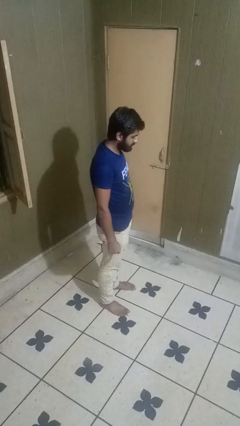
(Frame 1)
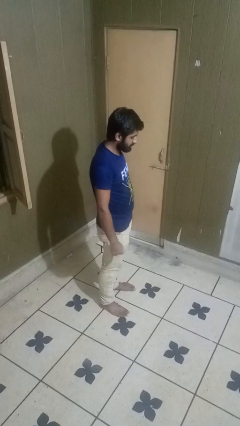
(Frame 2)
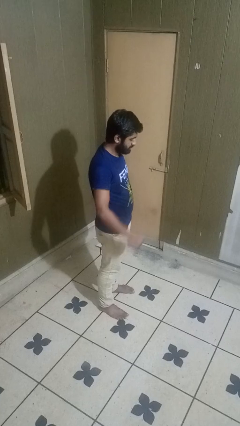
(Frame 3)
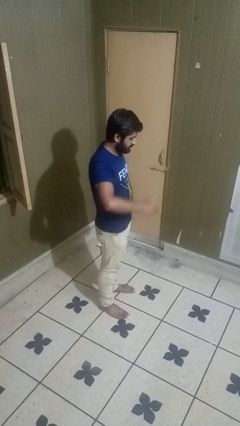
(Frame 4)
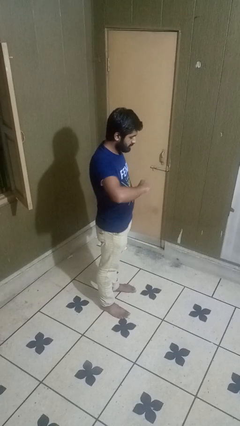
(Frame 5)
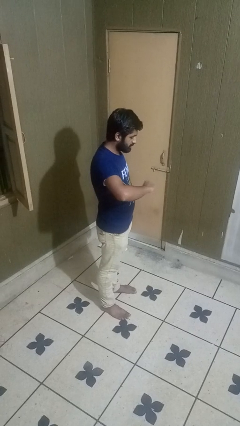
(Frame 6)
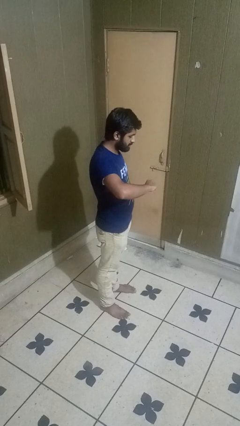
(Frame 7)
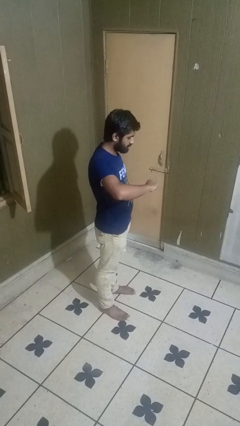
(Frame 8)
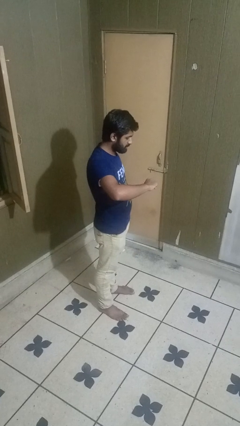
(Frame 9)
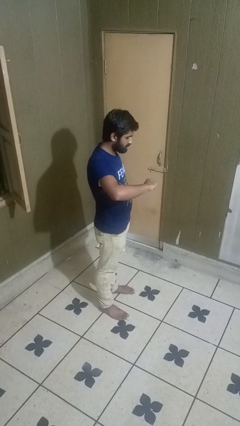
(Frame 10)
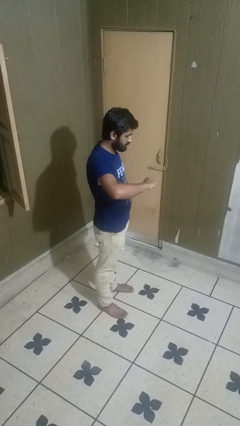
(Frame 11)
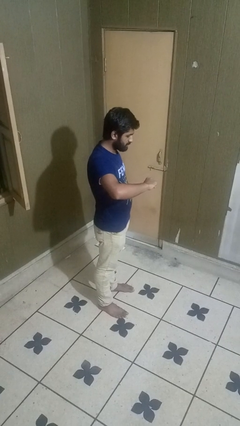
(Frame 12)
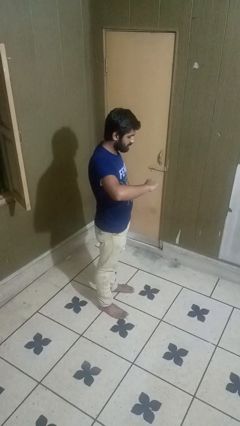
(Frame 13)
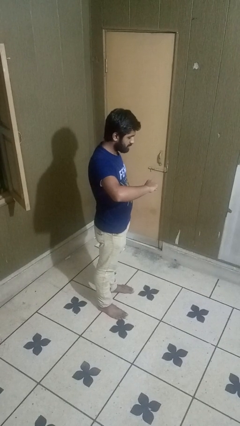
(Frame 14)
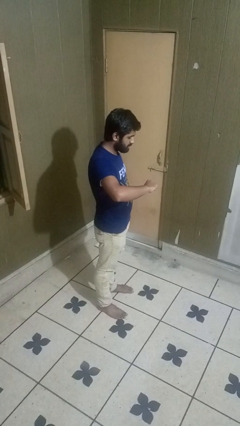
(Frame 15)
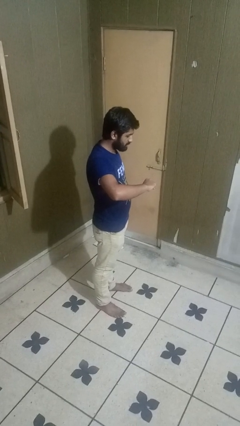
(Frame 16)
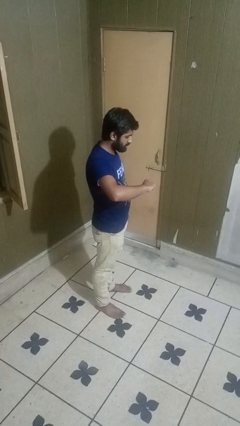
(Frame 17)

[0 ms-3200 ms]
person karate chop

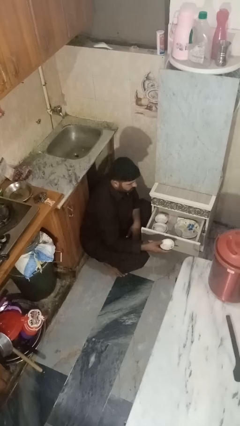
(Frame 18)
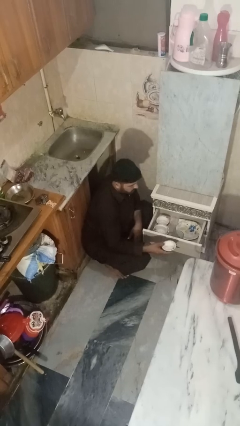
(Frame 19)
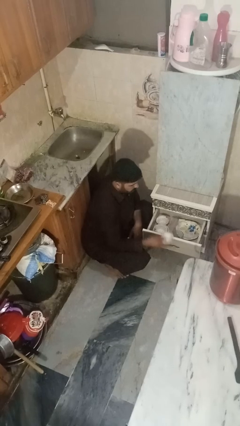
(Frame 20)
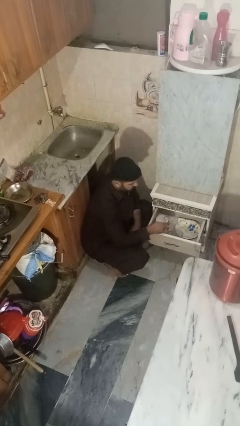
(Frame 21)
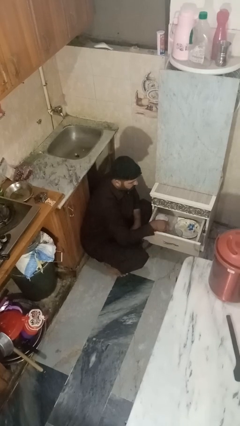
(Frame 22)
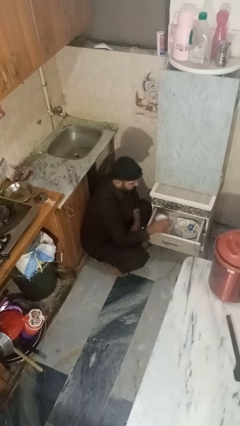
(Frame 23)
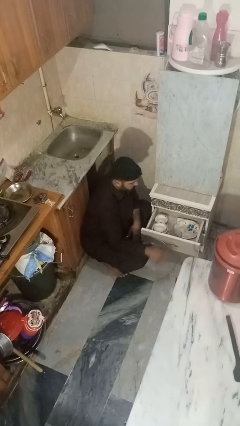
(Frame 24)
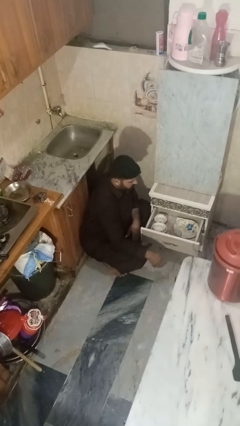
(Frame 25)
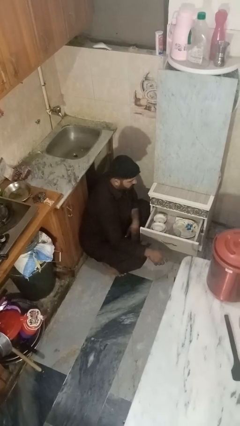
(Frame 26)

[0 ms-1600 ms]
person puts object into kitchen drawer

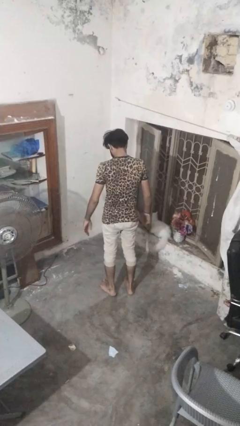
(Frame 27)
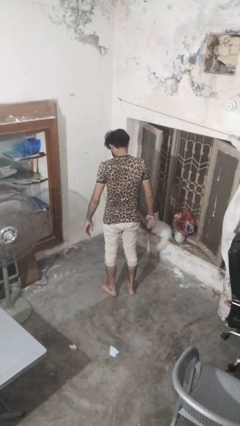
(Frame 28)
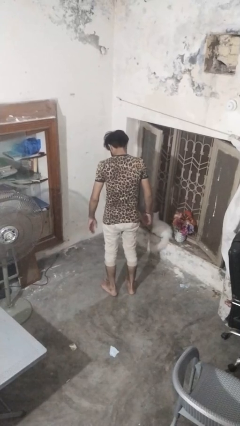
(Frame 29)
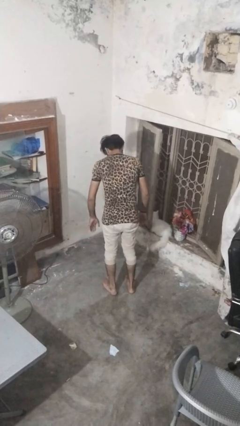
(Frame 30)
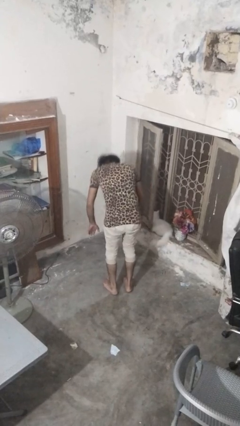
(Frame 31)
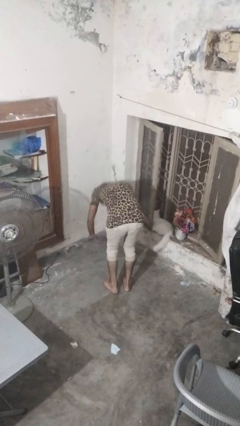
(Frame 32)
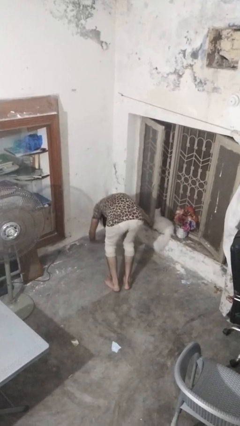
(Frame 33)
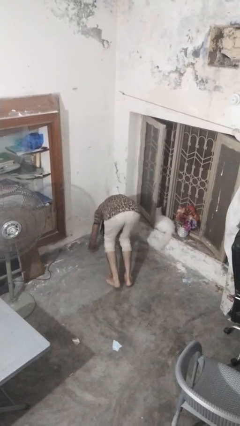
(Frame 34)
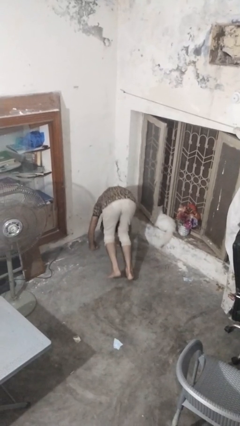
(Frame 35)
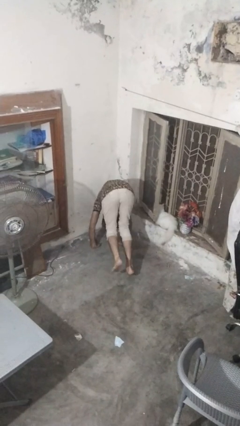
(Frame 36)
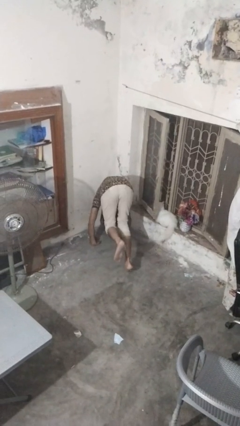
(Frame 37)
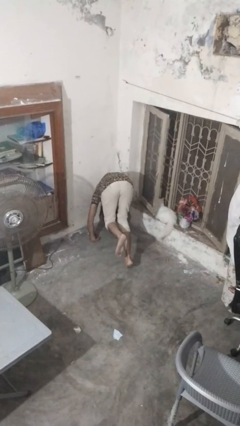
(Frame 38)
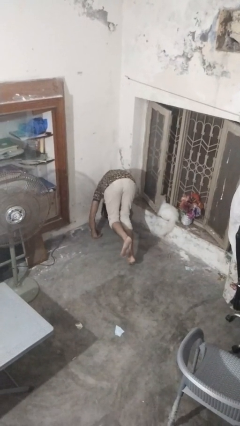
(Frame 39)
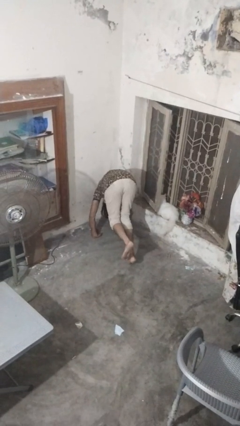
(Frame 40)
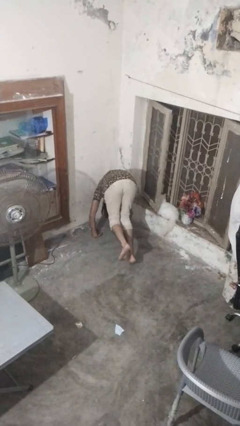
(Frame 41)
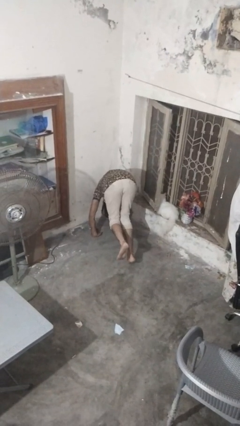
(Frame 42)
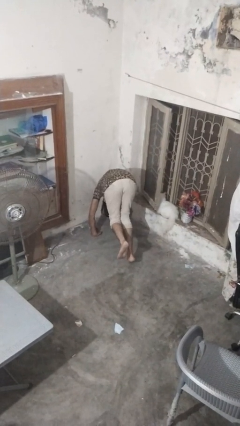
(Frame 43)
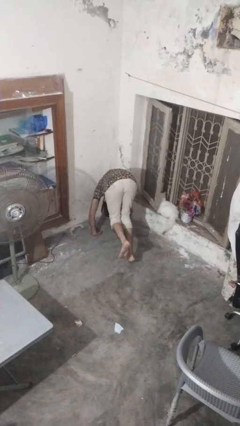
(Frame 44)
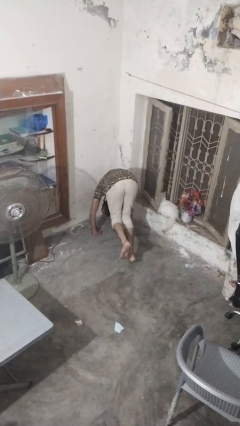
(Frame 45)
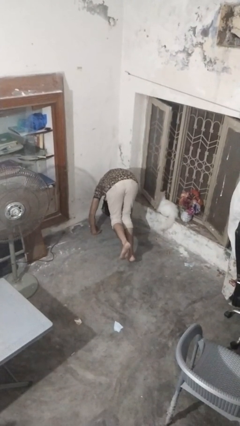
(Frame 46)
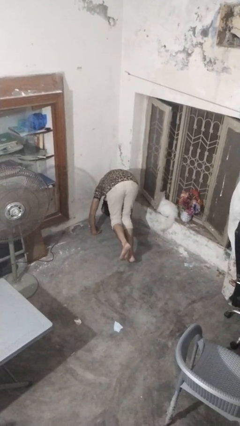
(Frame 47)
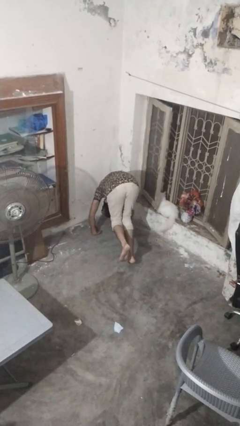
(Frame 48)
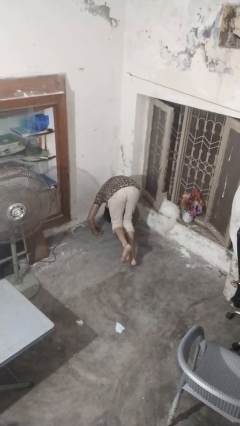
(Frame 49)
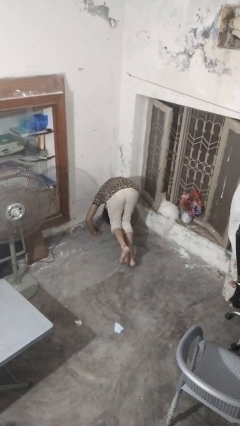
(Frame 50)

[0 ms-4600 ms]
person handstand

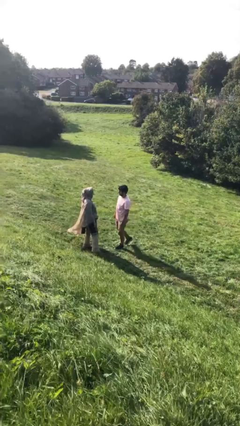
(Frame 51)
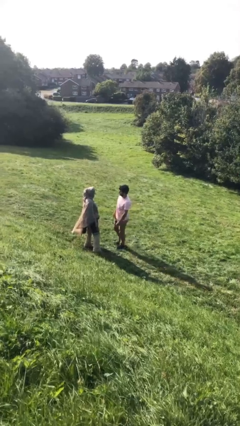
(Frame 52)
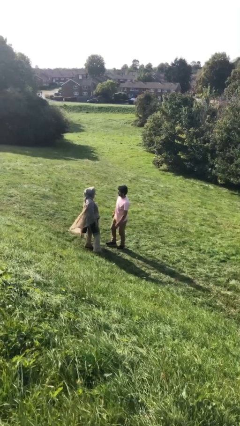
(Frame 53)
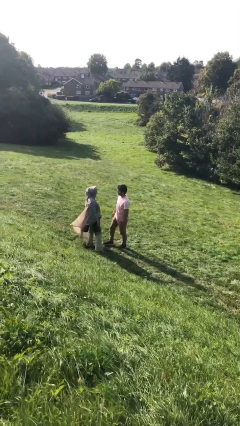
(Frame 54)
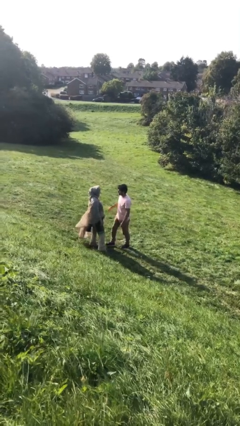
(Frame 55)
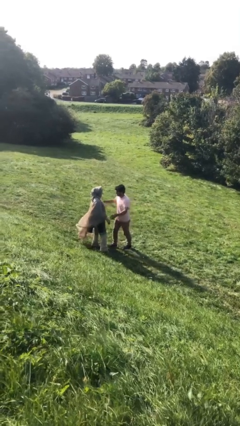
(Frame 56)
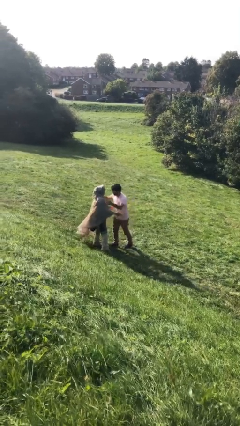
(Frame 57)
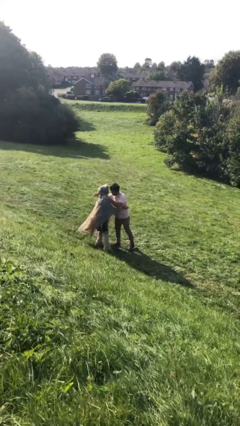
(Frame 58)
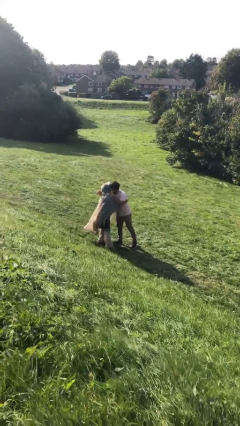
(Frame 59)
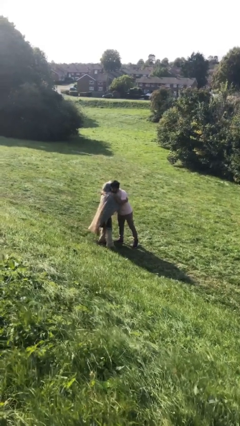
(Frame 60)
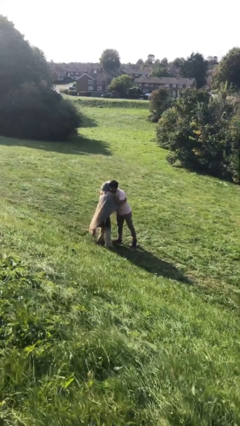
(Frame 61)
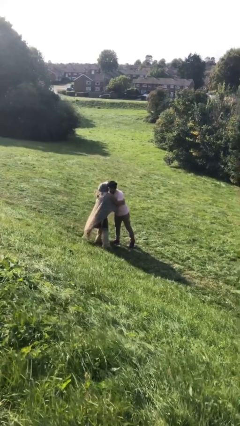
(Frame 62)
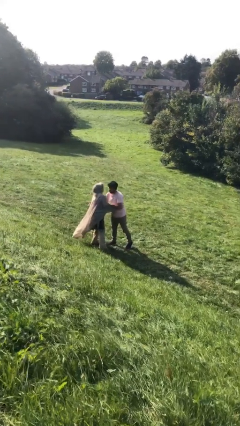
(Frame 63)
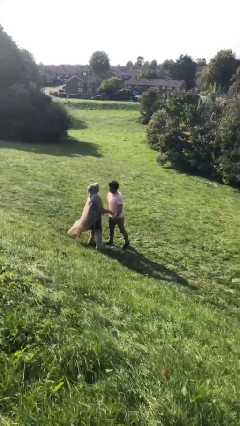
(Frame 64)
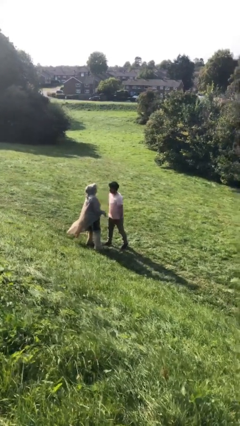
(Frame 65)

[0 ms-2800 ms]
person embraces person

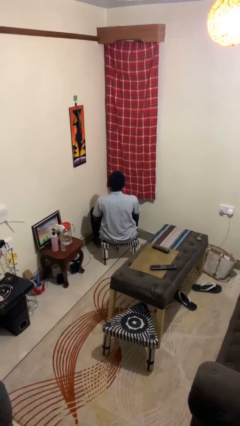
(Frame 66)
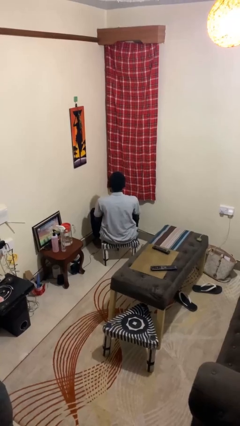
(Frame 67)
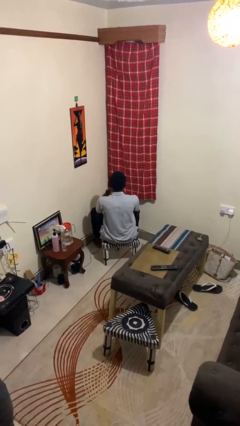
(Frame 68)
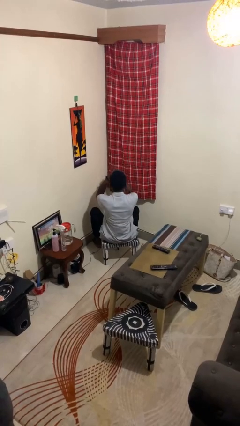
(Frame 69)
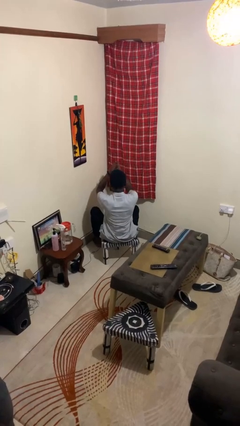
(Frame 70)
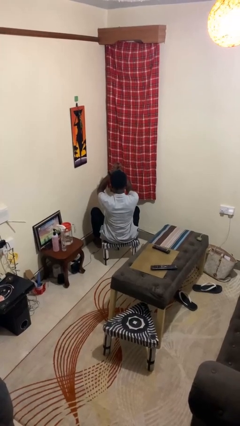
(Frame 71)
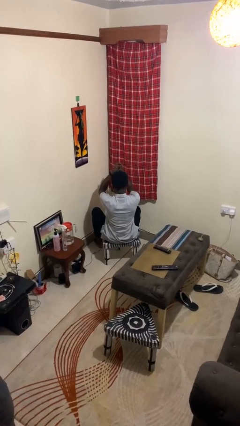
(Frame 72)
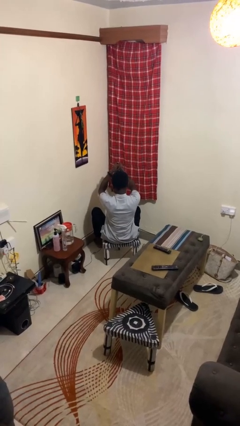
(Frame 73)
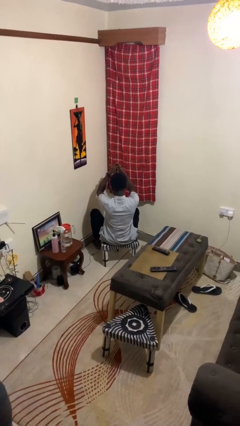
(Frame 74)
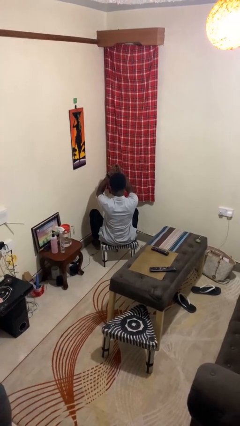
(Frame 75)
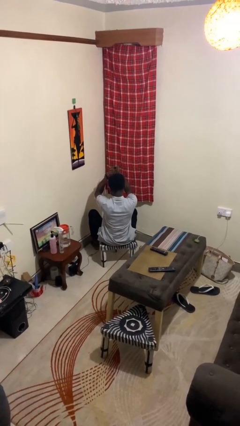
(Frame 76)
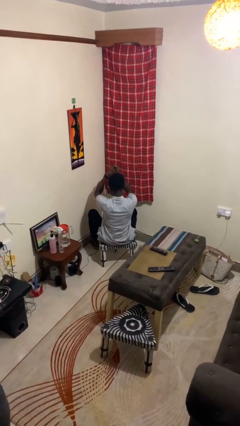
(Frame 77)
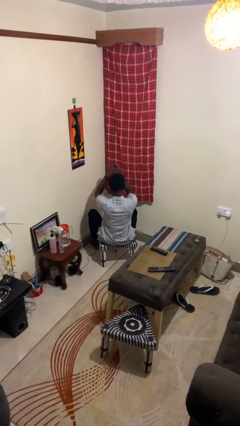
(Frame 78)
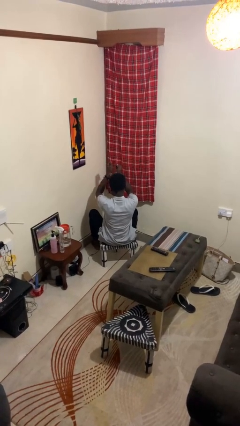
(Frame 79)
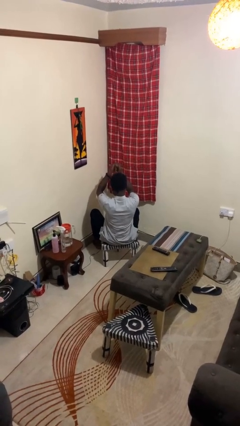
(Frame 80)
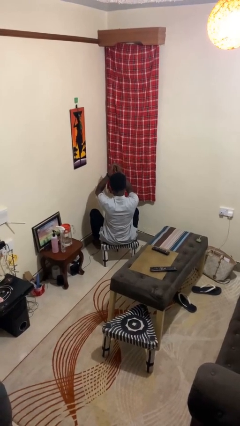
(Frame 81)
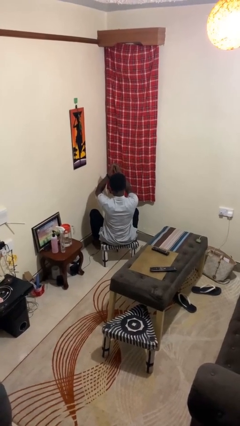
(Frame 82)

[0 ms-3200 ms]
person cracks knuckles

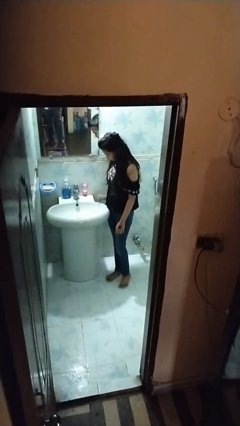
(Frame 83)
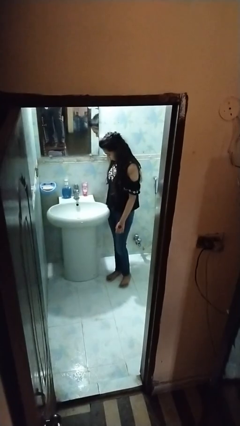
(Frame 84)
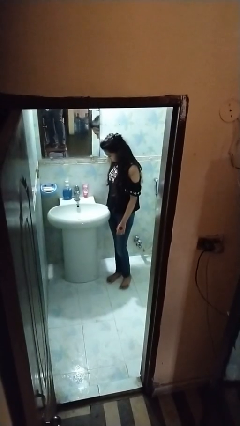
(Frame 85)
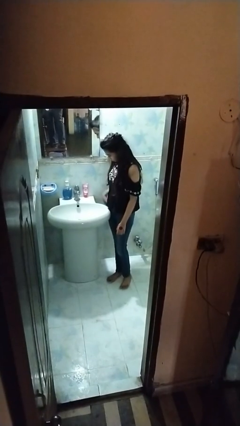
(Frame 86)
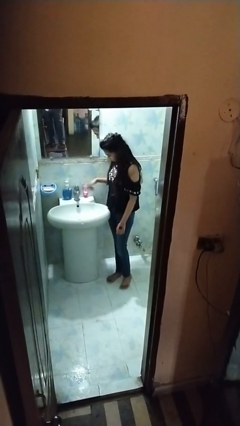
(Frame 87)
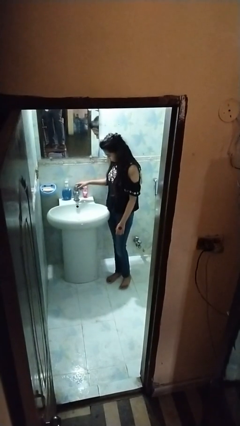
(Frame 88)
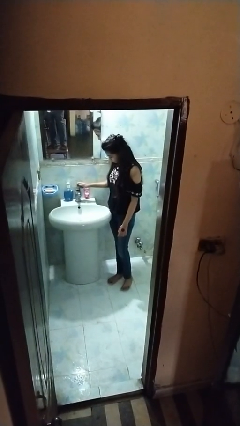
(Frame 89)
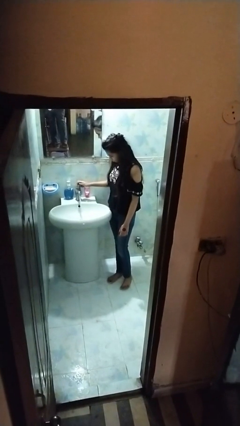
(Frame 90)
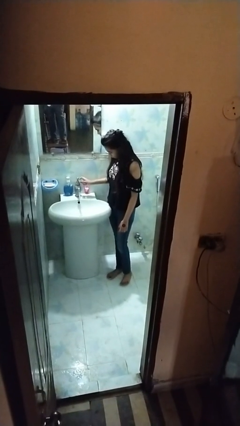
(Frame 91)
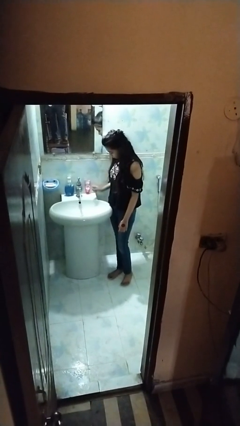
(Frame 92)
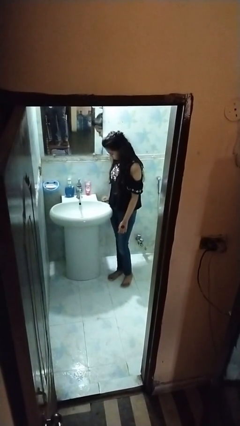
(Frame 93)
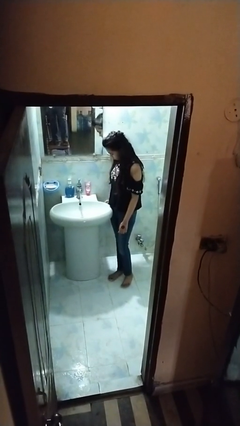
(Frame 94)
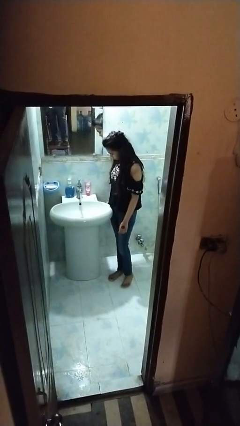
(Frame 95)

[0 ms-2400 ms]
person turns on faucet
